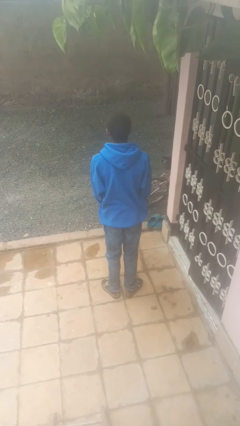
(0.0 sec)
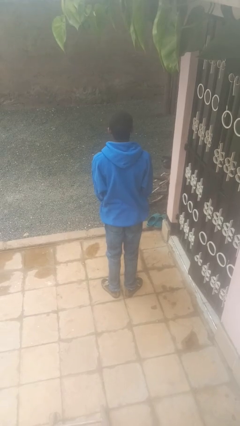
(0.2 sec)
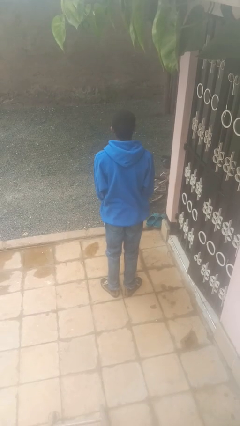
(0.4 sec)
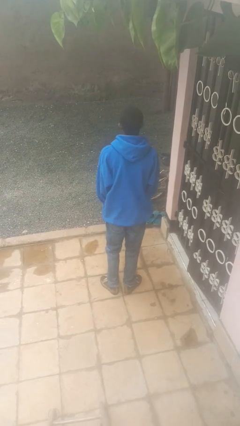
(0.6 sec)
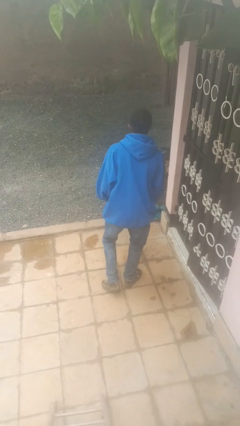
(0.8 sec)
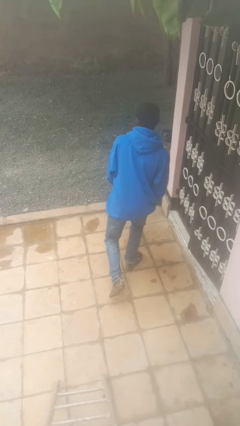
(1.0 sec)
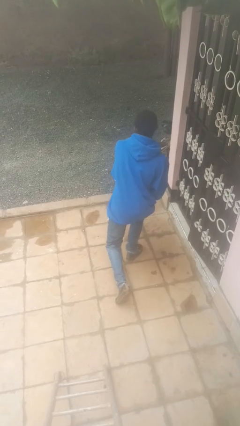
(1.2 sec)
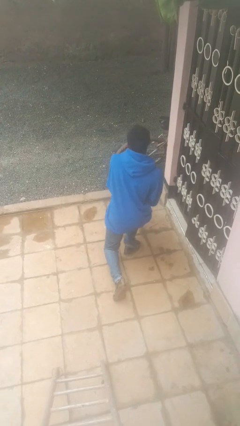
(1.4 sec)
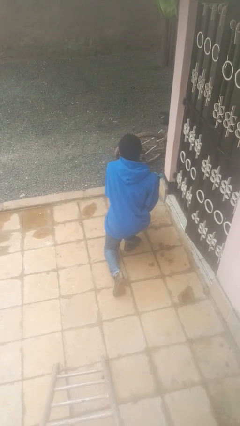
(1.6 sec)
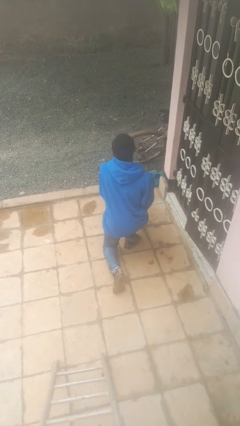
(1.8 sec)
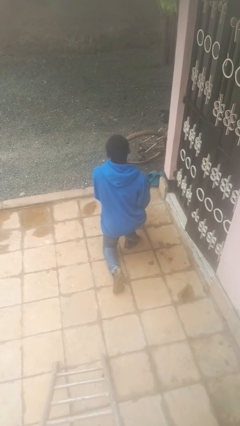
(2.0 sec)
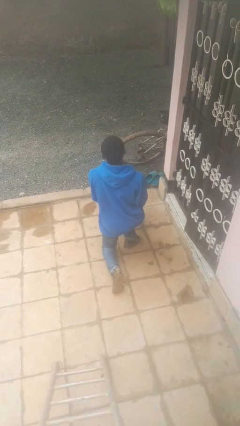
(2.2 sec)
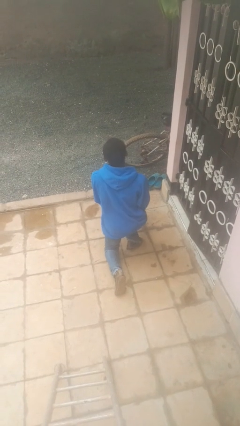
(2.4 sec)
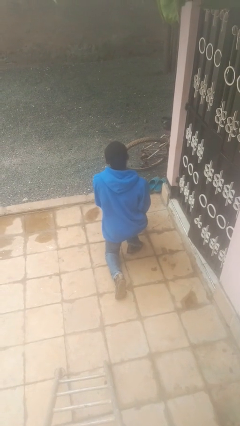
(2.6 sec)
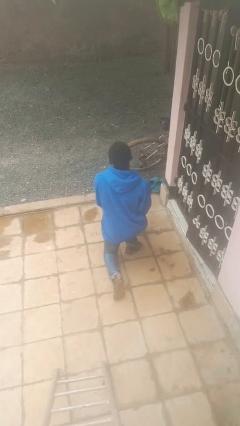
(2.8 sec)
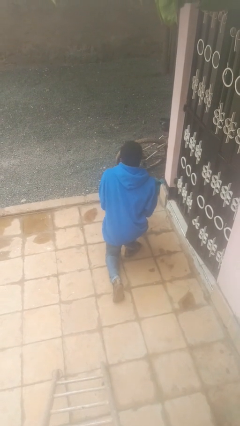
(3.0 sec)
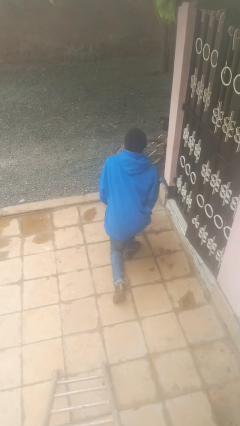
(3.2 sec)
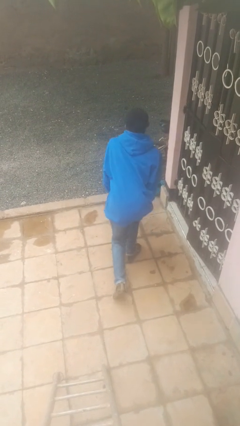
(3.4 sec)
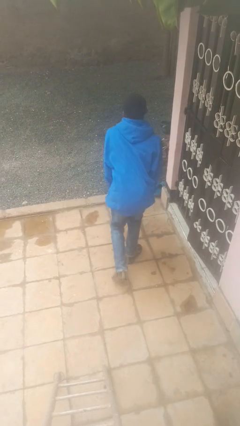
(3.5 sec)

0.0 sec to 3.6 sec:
person kneels

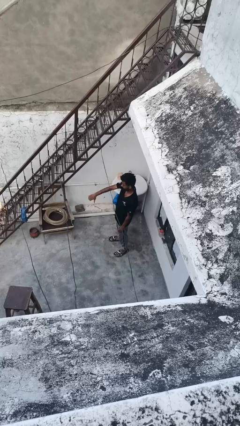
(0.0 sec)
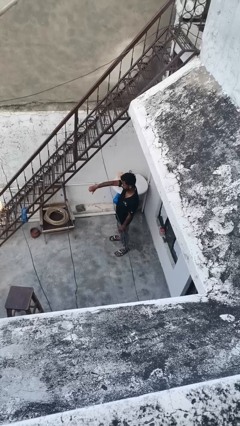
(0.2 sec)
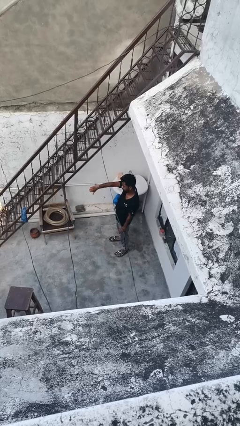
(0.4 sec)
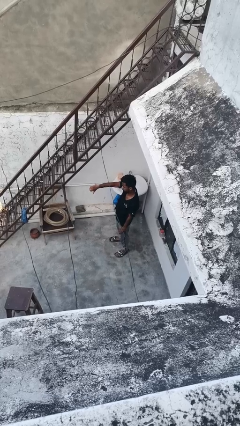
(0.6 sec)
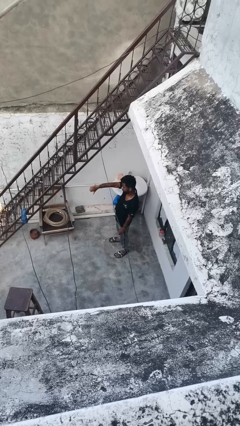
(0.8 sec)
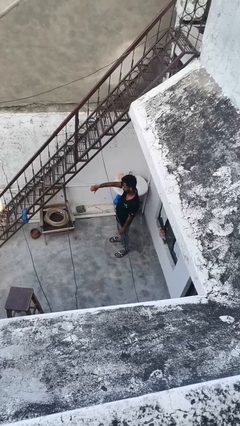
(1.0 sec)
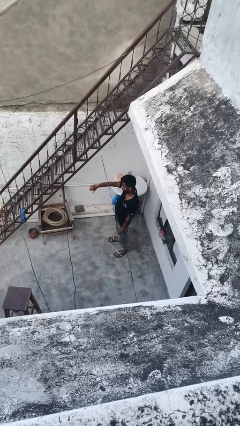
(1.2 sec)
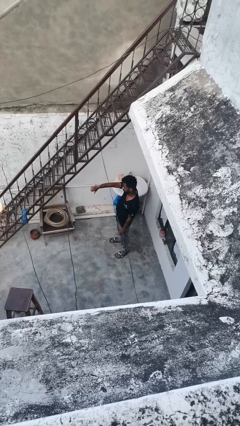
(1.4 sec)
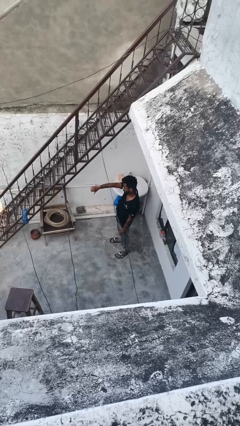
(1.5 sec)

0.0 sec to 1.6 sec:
person gestures thumbs down

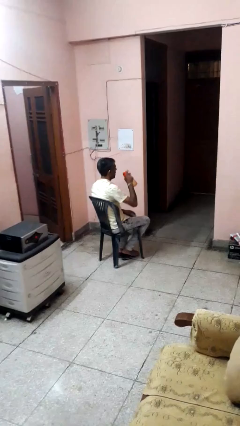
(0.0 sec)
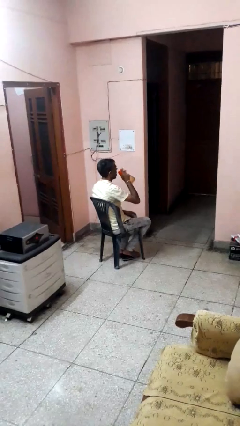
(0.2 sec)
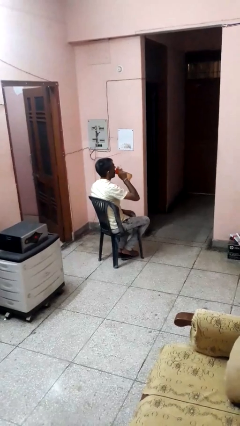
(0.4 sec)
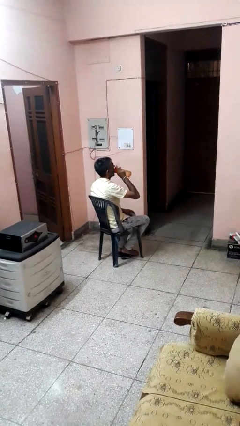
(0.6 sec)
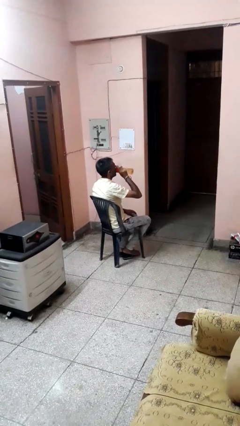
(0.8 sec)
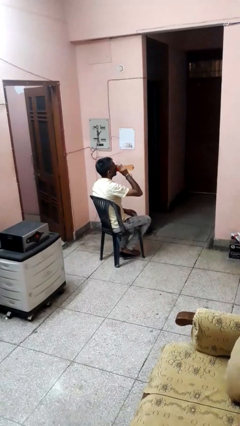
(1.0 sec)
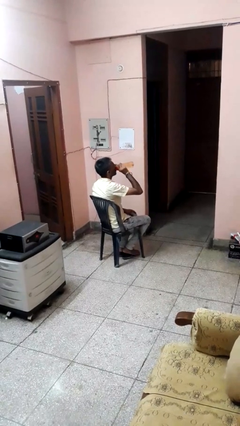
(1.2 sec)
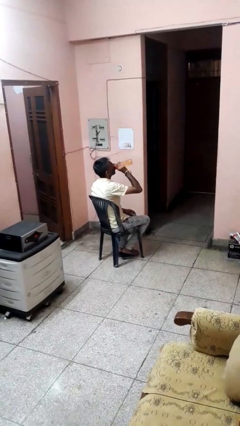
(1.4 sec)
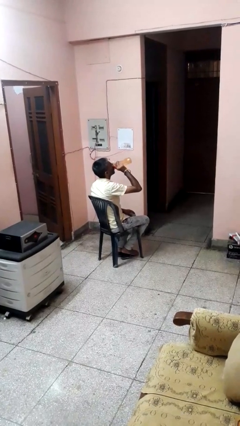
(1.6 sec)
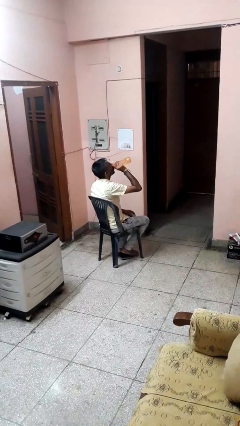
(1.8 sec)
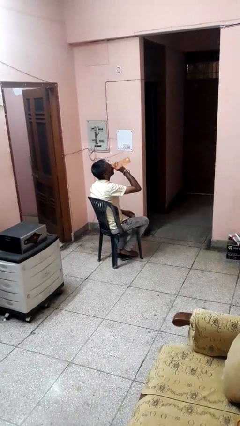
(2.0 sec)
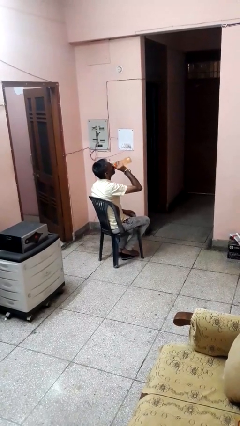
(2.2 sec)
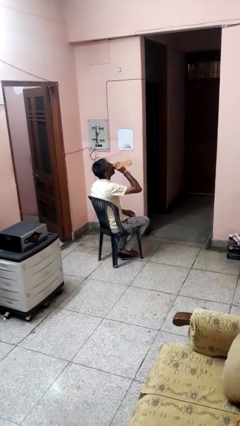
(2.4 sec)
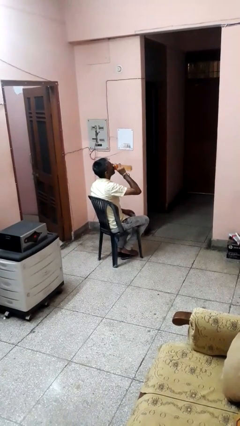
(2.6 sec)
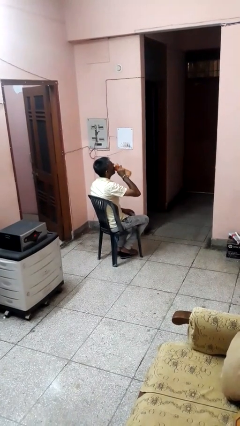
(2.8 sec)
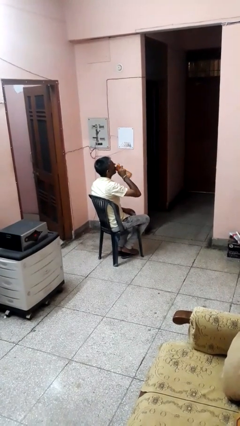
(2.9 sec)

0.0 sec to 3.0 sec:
person drinks from bottle

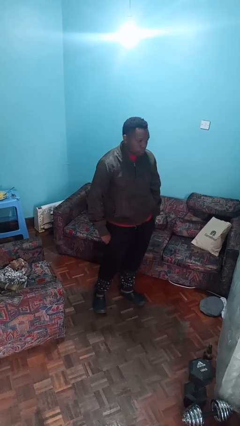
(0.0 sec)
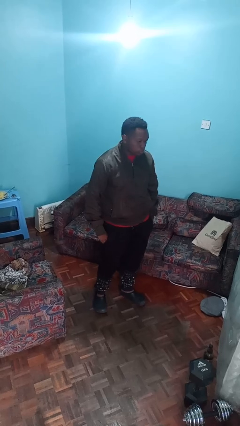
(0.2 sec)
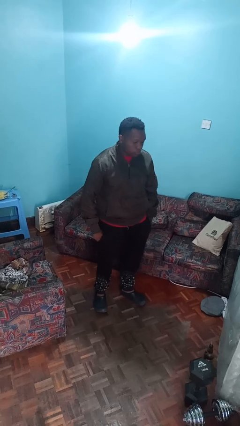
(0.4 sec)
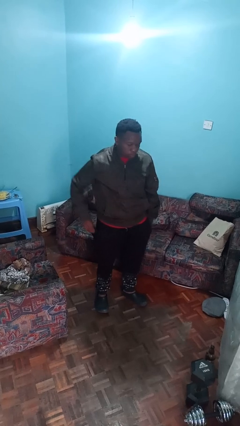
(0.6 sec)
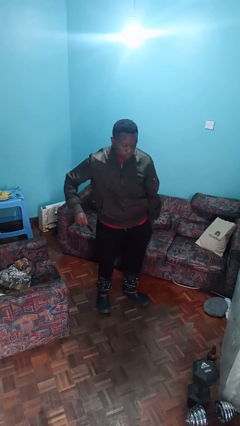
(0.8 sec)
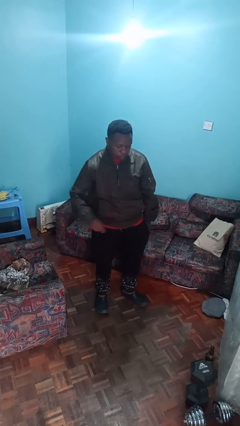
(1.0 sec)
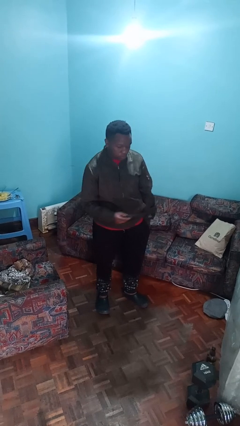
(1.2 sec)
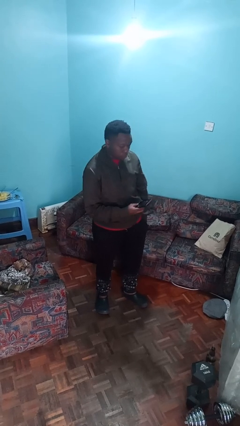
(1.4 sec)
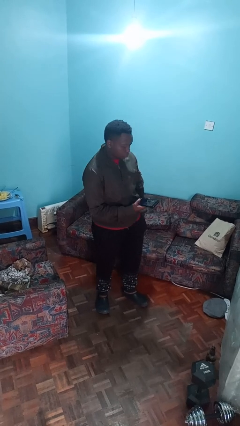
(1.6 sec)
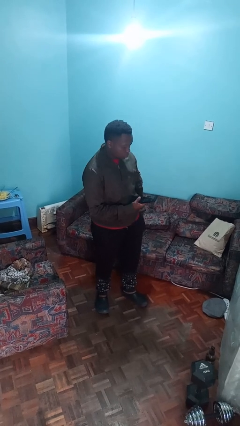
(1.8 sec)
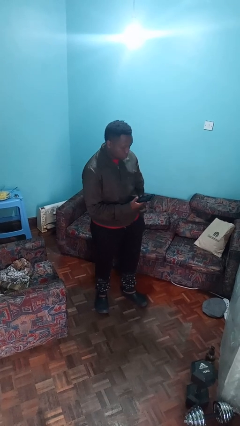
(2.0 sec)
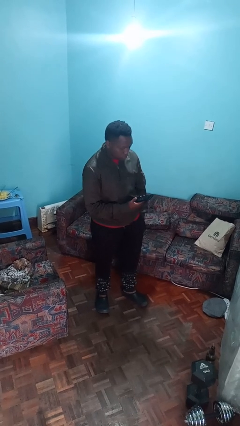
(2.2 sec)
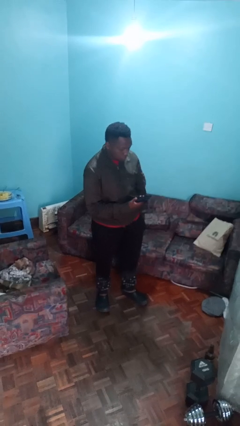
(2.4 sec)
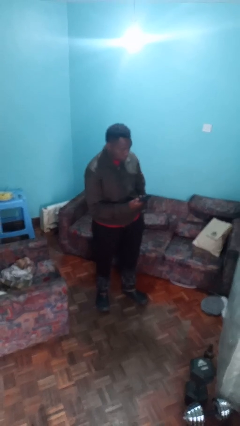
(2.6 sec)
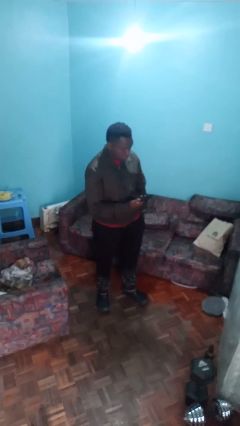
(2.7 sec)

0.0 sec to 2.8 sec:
person takes phone from pocket

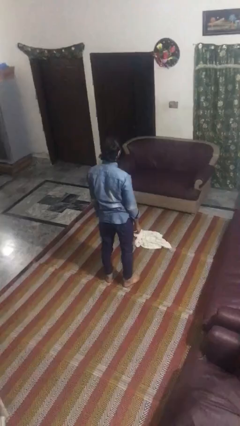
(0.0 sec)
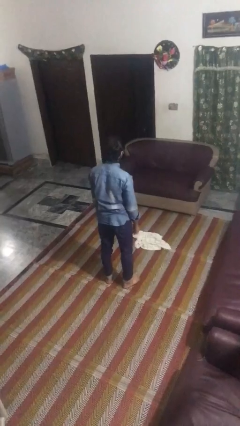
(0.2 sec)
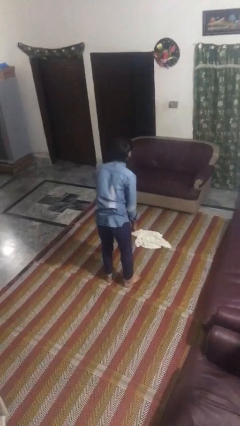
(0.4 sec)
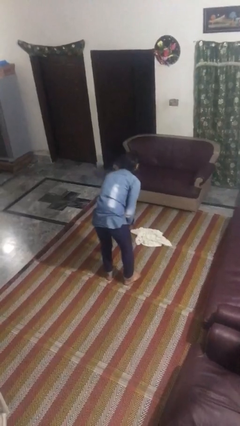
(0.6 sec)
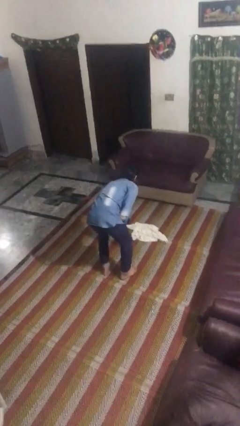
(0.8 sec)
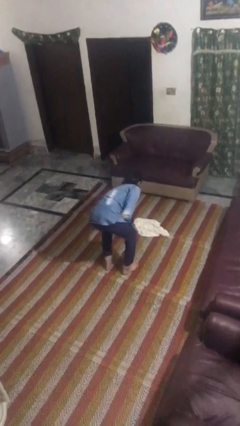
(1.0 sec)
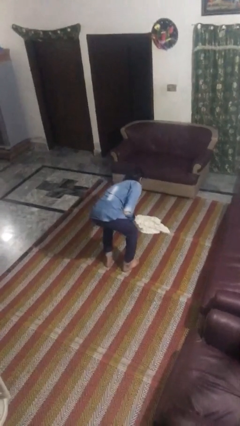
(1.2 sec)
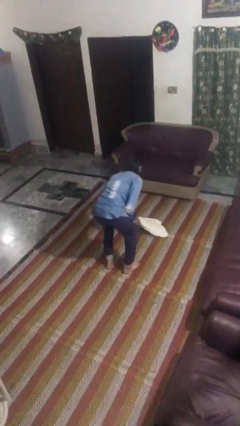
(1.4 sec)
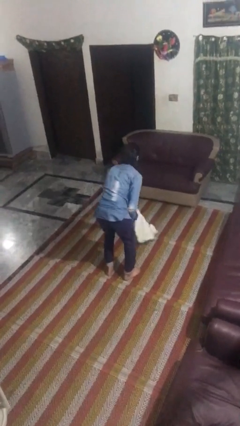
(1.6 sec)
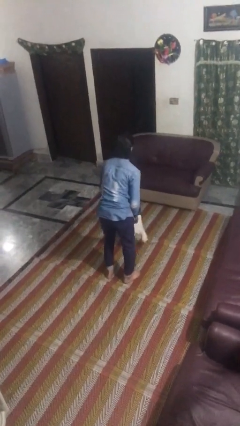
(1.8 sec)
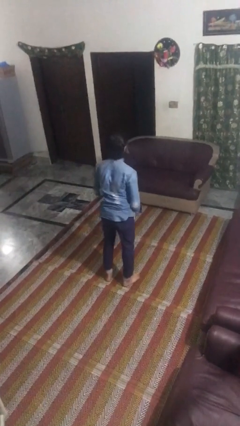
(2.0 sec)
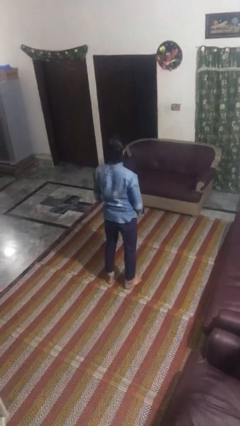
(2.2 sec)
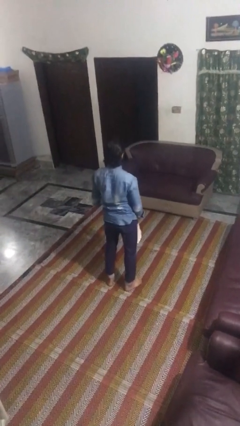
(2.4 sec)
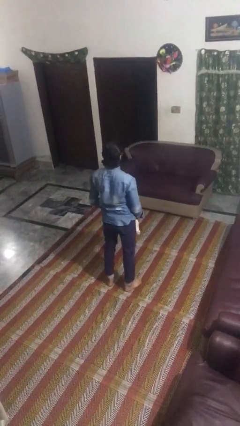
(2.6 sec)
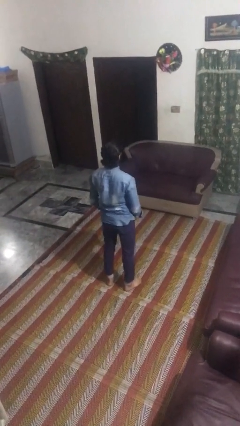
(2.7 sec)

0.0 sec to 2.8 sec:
person picks up object from floor

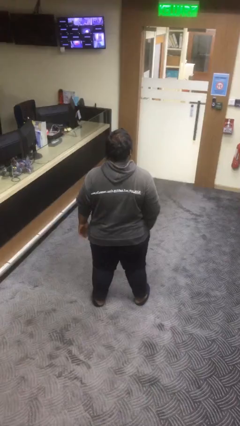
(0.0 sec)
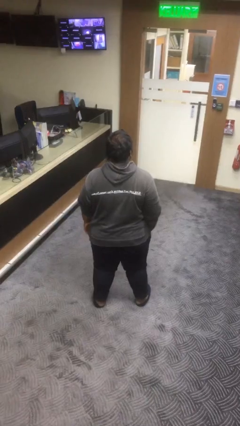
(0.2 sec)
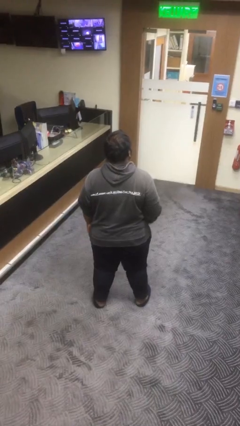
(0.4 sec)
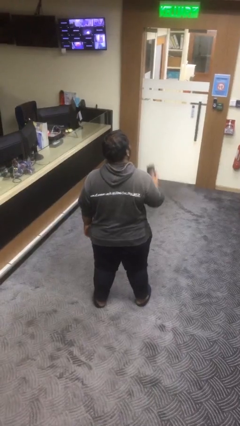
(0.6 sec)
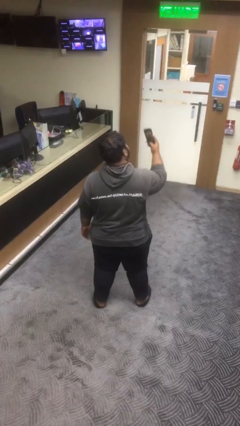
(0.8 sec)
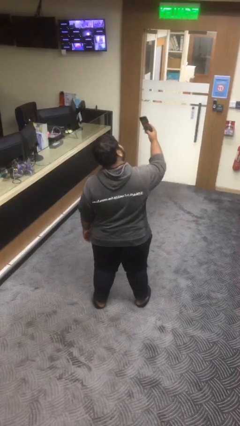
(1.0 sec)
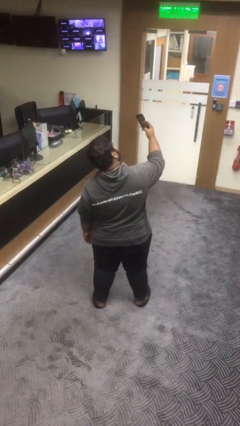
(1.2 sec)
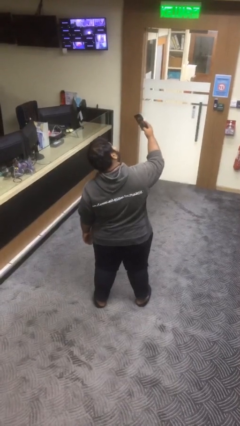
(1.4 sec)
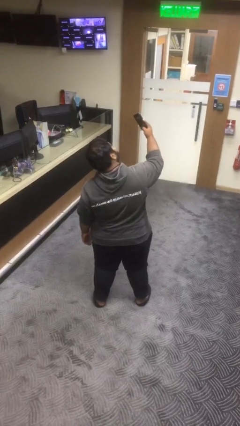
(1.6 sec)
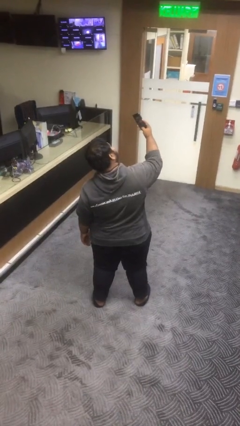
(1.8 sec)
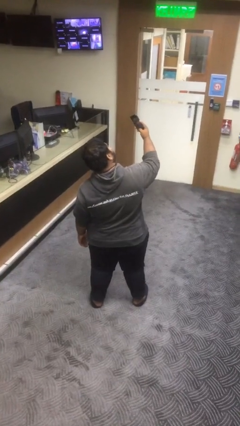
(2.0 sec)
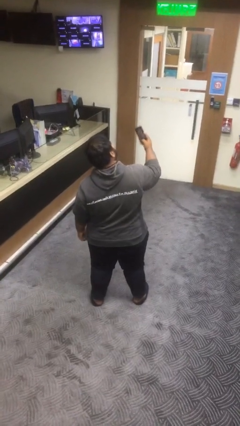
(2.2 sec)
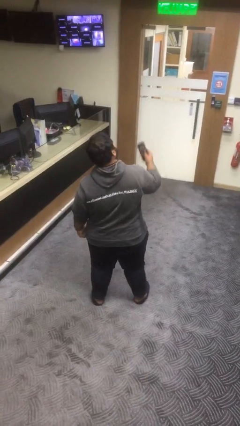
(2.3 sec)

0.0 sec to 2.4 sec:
person takes selfie

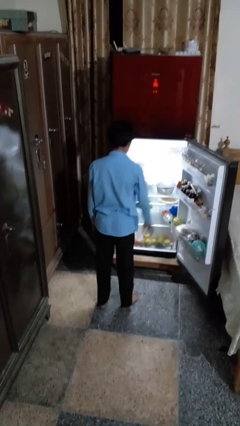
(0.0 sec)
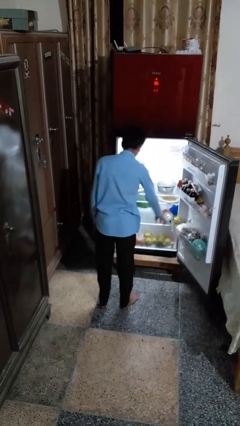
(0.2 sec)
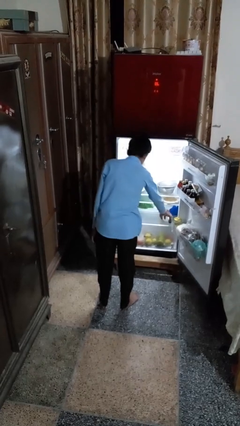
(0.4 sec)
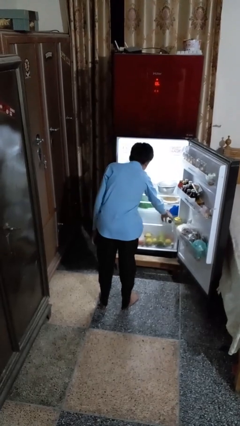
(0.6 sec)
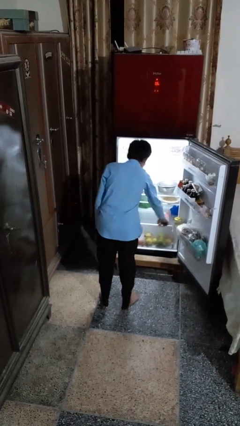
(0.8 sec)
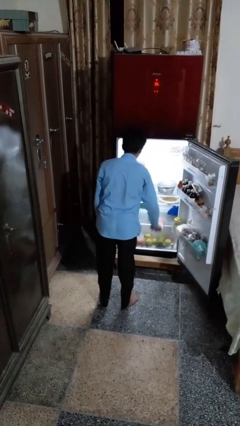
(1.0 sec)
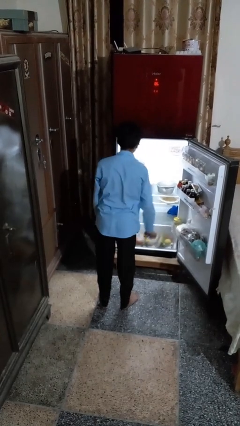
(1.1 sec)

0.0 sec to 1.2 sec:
person takes object from refrigerator
